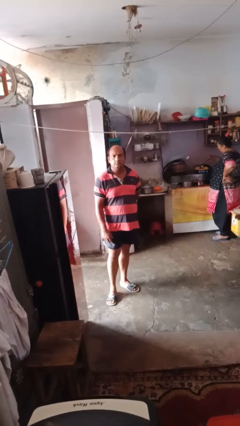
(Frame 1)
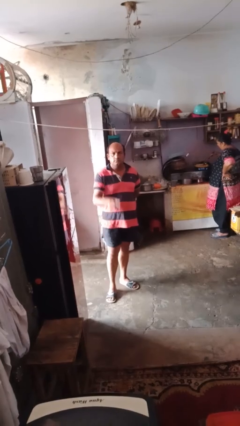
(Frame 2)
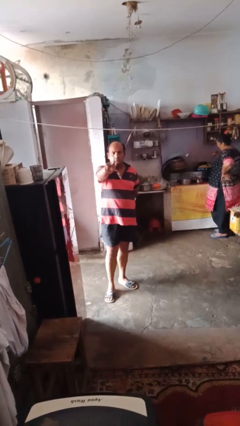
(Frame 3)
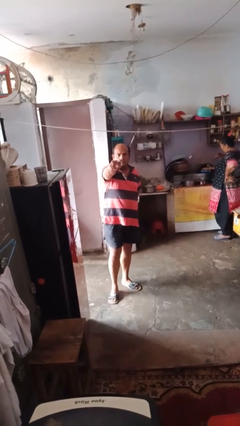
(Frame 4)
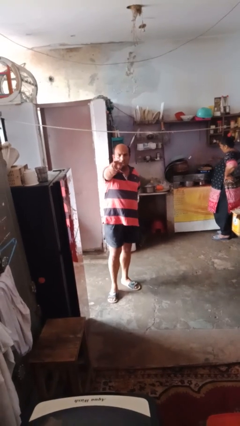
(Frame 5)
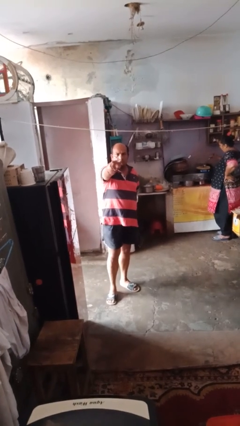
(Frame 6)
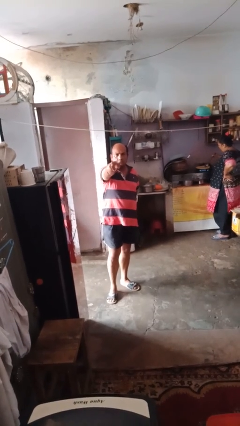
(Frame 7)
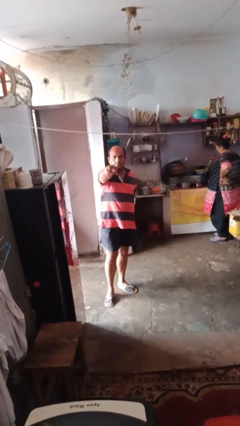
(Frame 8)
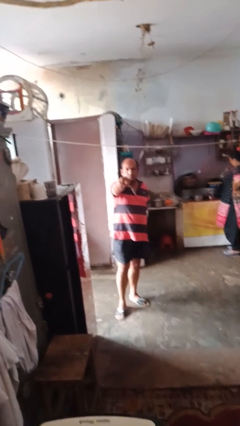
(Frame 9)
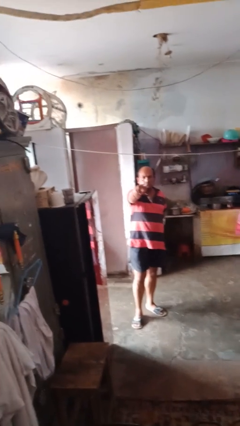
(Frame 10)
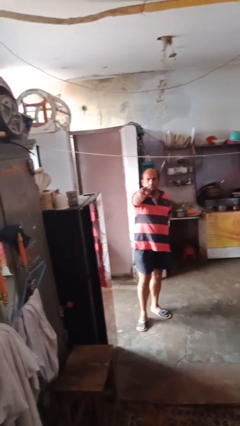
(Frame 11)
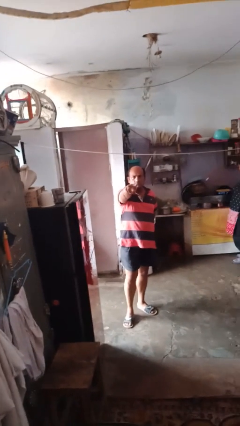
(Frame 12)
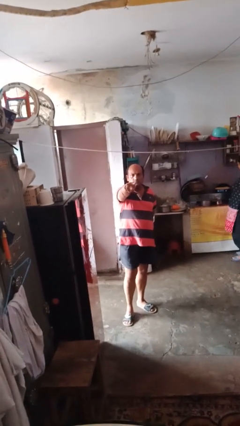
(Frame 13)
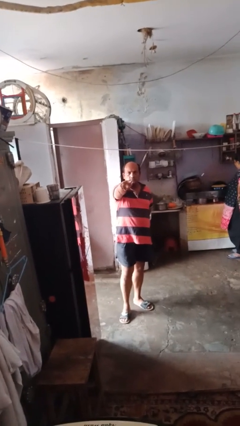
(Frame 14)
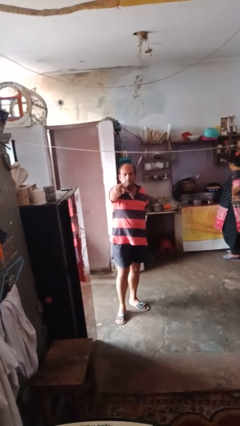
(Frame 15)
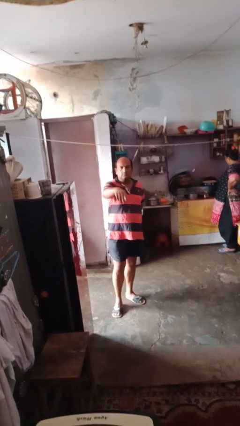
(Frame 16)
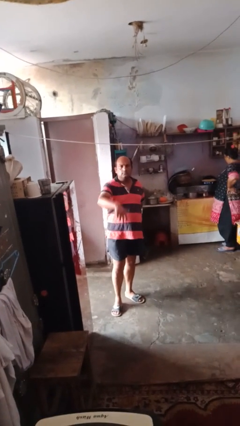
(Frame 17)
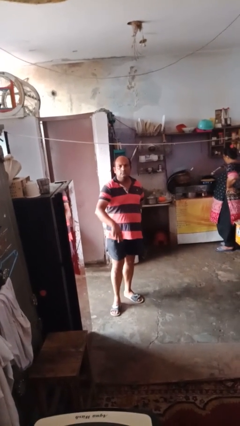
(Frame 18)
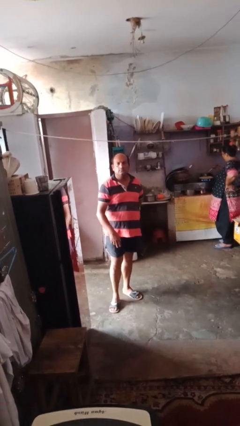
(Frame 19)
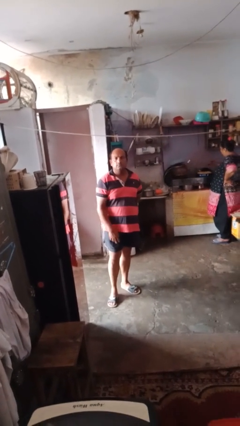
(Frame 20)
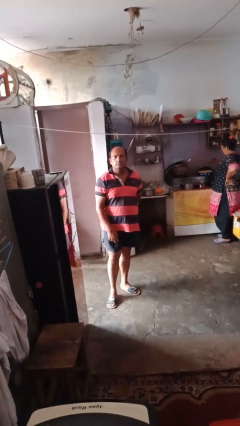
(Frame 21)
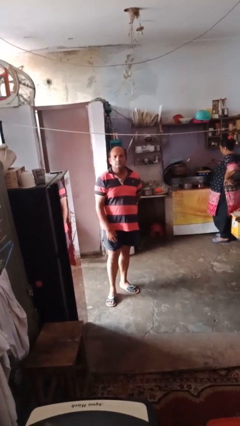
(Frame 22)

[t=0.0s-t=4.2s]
person gestures behind me

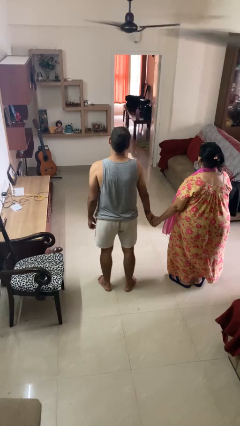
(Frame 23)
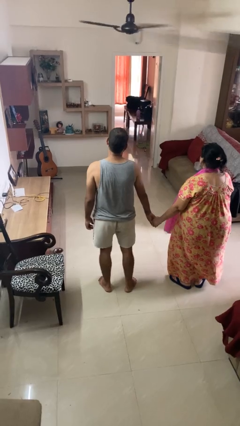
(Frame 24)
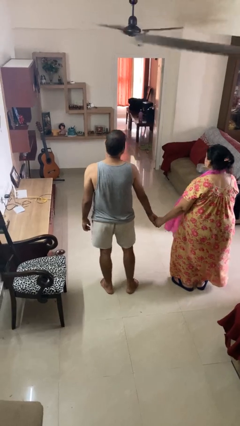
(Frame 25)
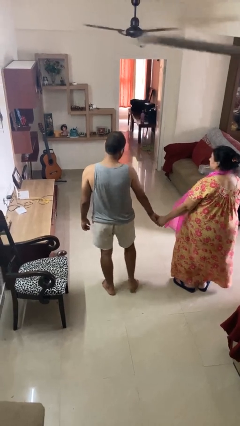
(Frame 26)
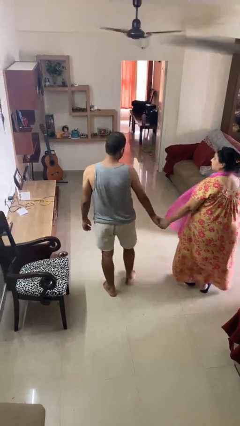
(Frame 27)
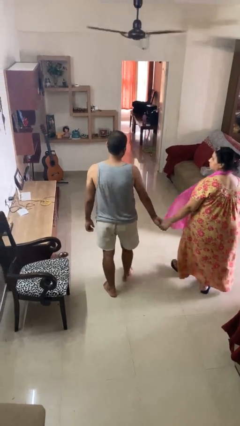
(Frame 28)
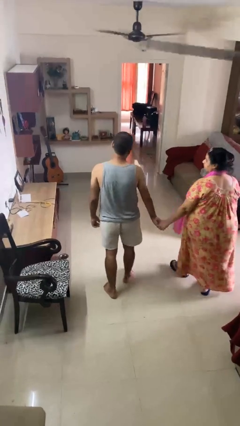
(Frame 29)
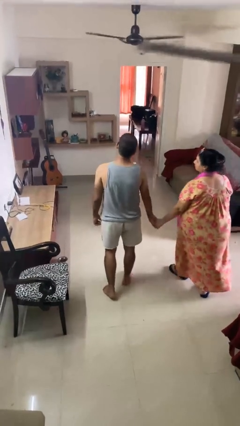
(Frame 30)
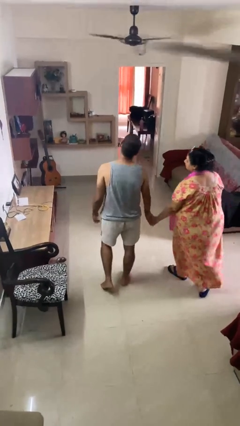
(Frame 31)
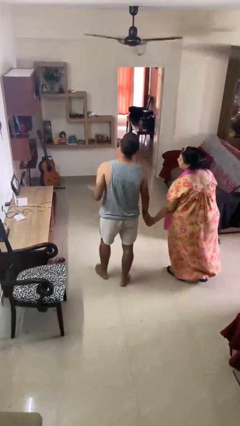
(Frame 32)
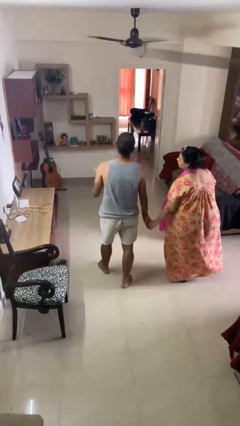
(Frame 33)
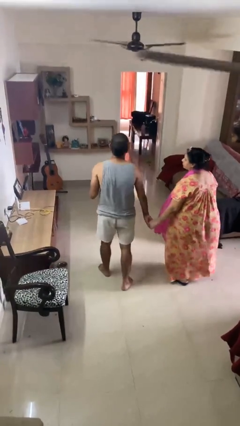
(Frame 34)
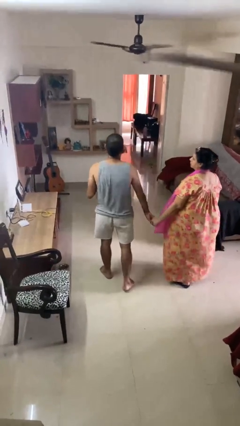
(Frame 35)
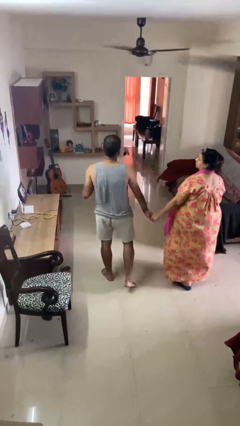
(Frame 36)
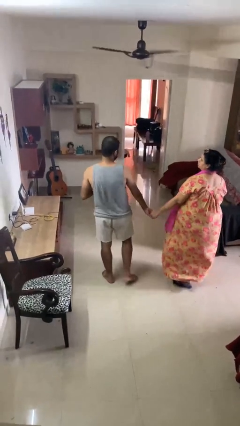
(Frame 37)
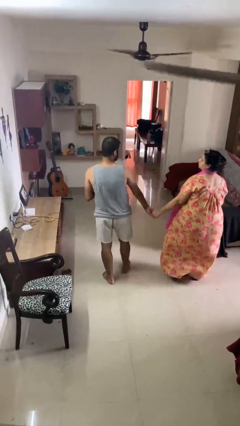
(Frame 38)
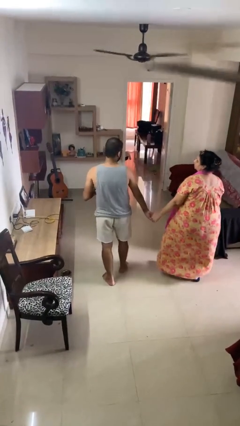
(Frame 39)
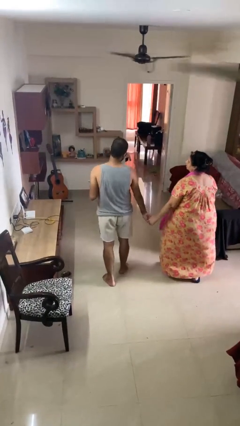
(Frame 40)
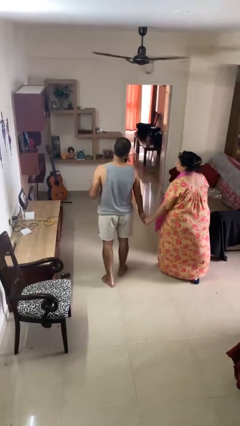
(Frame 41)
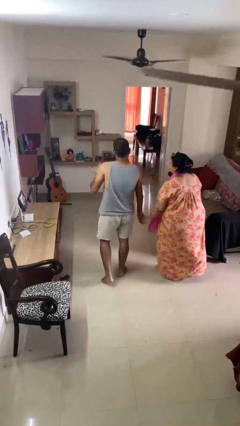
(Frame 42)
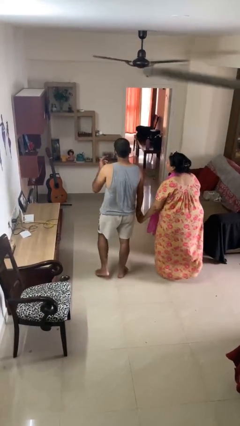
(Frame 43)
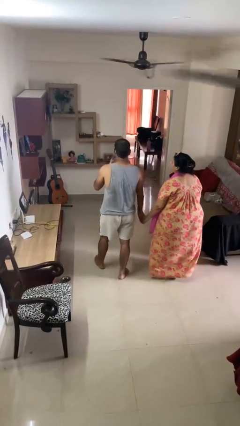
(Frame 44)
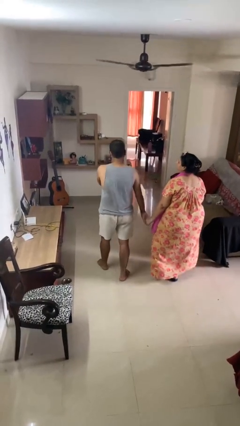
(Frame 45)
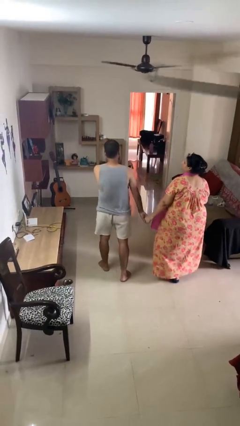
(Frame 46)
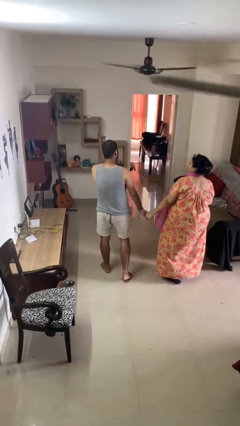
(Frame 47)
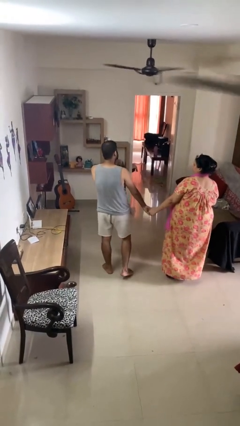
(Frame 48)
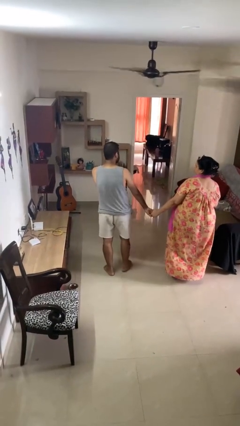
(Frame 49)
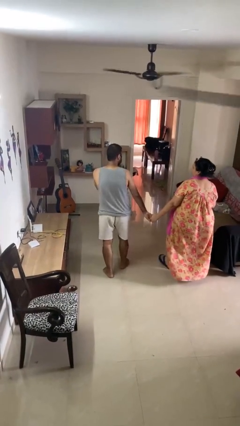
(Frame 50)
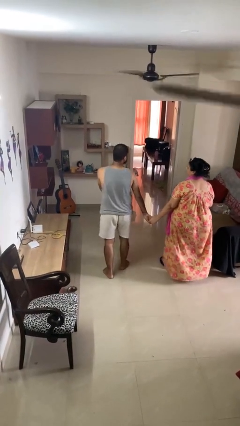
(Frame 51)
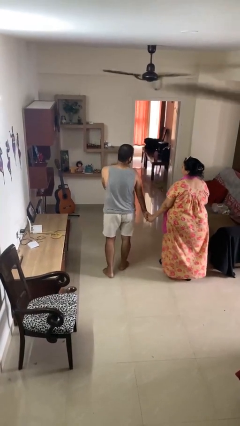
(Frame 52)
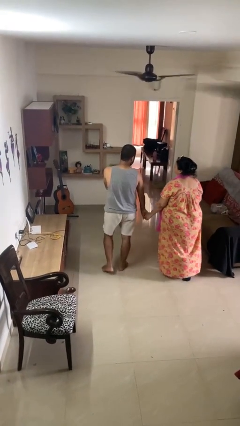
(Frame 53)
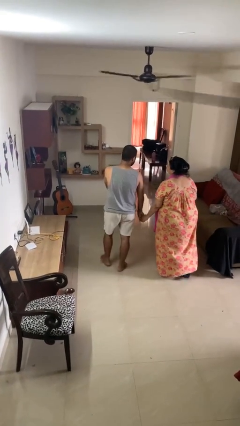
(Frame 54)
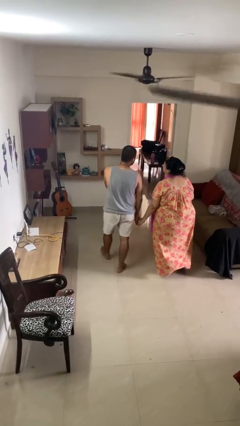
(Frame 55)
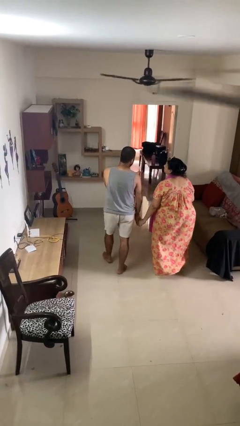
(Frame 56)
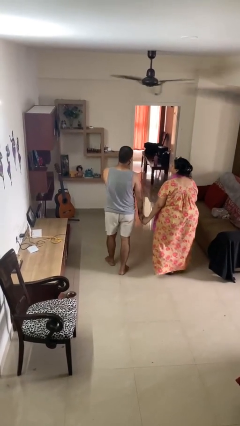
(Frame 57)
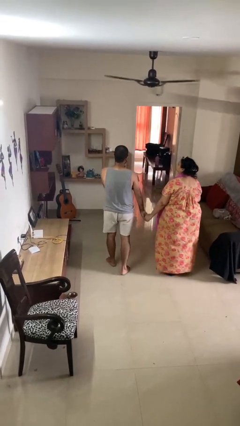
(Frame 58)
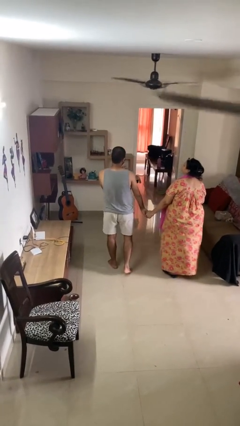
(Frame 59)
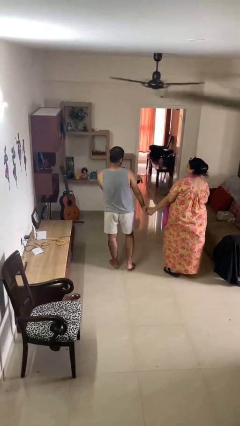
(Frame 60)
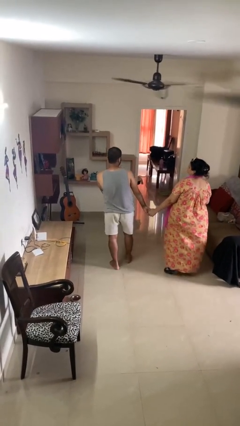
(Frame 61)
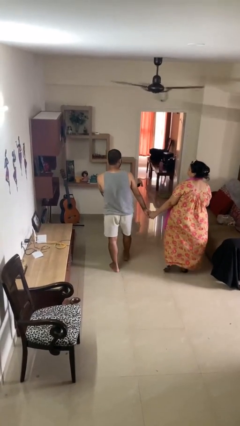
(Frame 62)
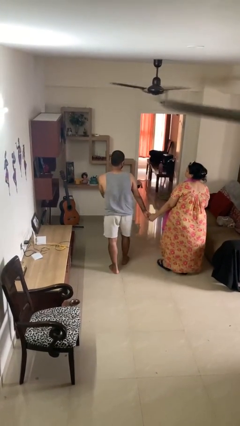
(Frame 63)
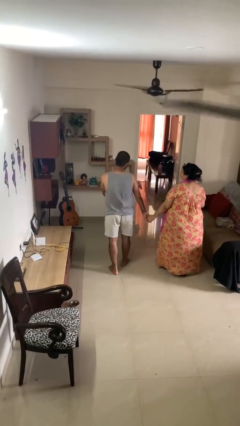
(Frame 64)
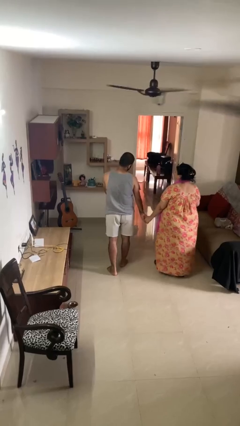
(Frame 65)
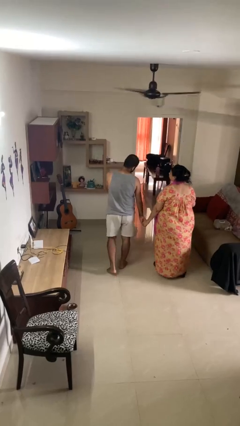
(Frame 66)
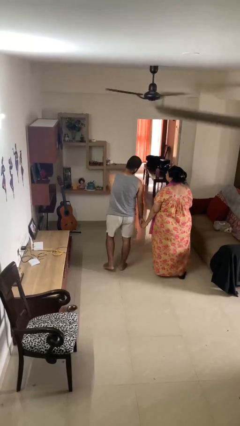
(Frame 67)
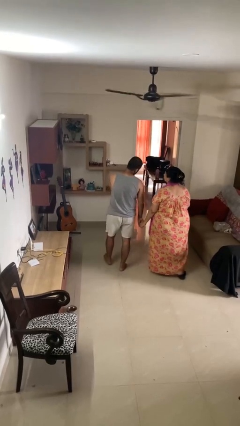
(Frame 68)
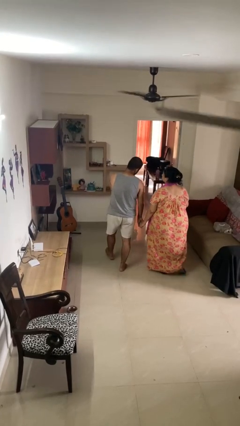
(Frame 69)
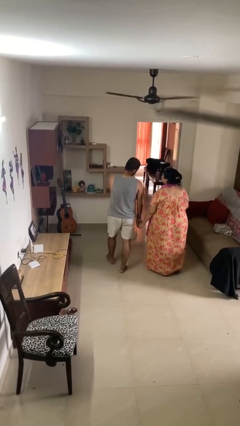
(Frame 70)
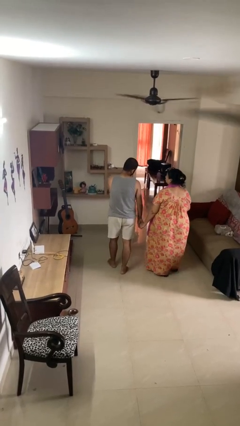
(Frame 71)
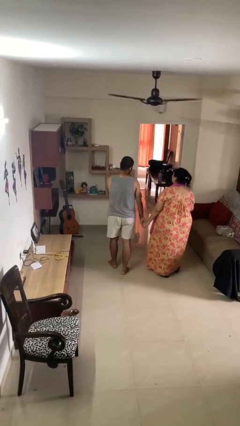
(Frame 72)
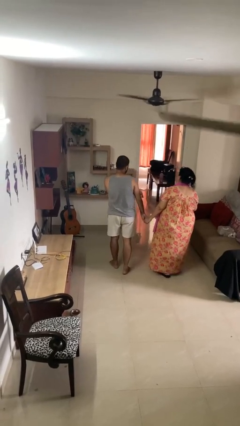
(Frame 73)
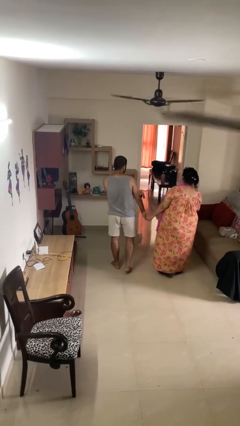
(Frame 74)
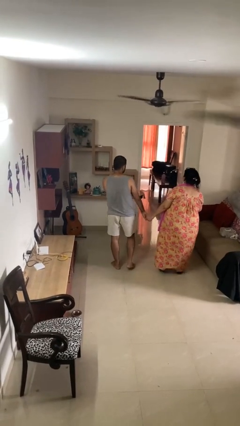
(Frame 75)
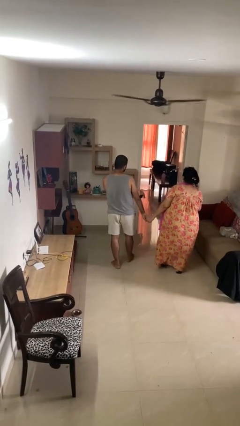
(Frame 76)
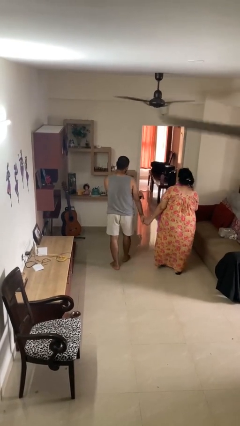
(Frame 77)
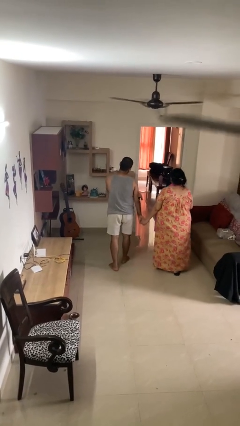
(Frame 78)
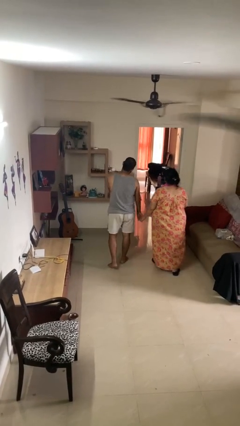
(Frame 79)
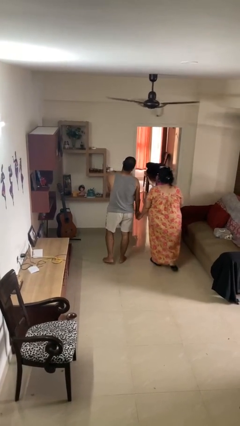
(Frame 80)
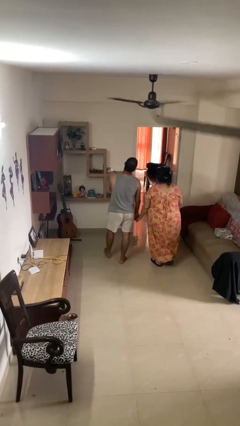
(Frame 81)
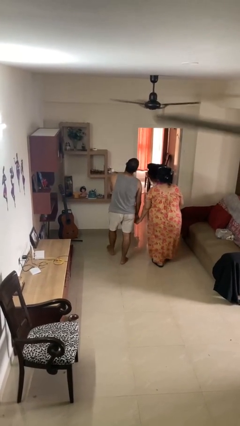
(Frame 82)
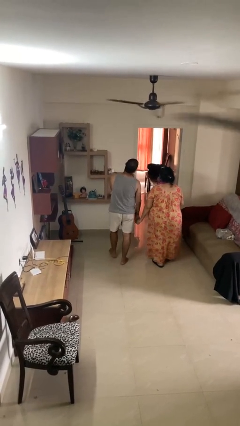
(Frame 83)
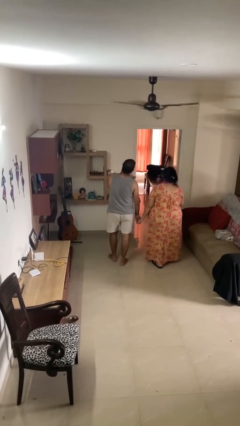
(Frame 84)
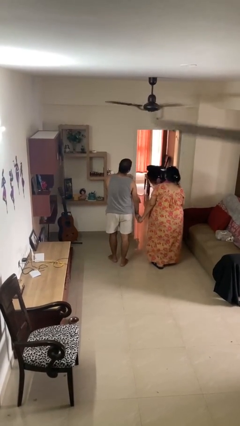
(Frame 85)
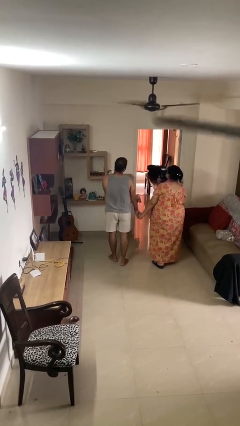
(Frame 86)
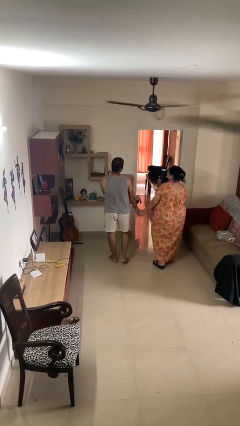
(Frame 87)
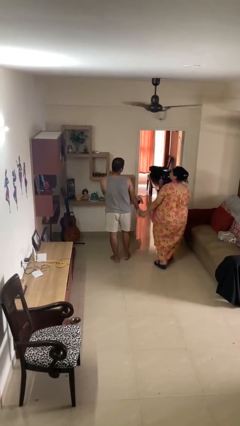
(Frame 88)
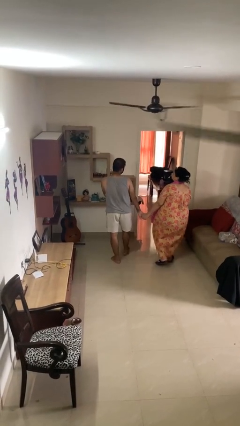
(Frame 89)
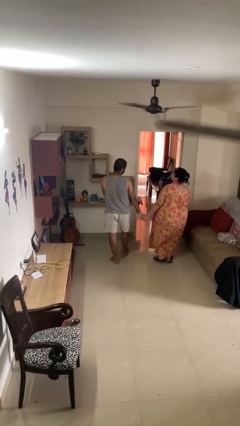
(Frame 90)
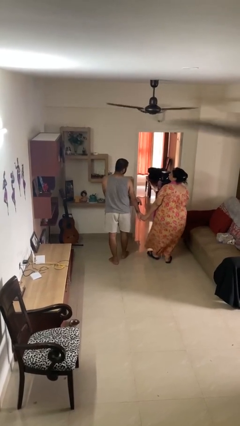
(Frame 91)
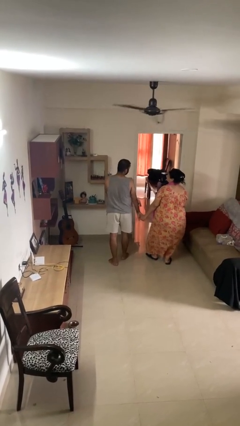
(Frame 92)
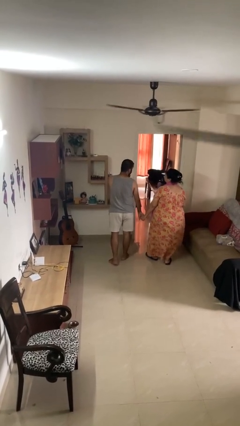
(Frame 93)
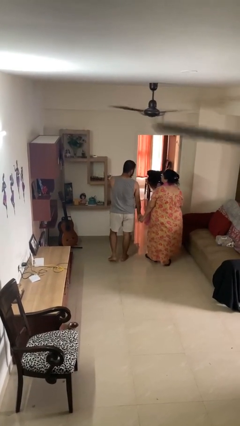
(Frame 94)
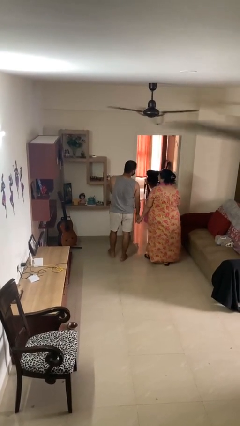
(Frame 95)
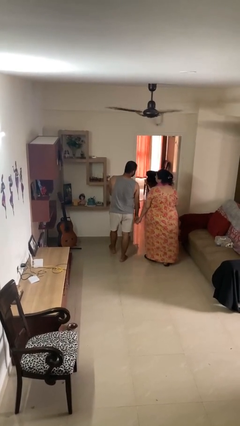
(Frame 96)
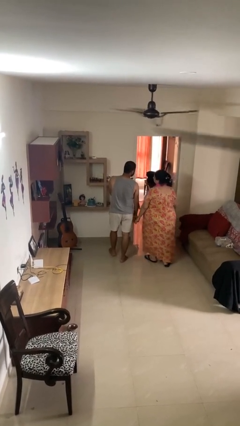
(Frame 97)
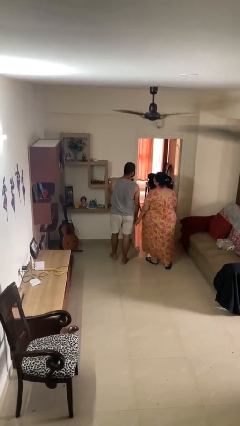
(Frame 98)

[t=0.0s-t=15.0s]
person holds hand
